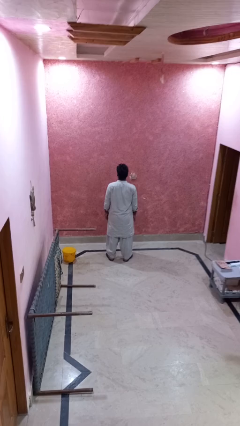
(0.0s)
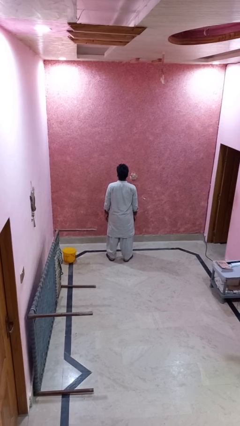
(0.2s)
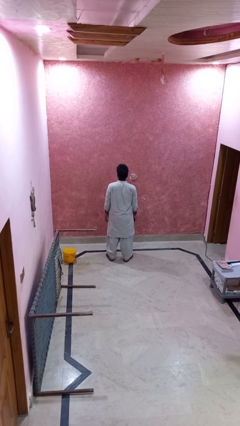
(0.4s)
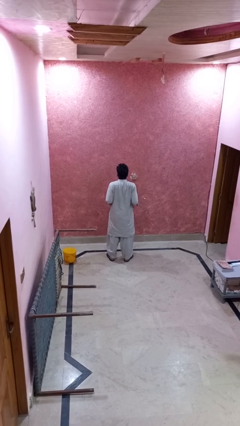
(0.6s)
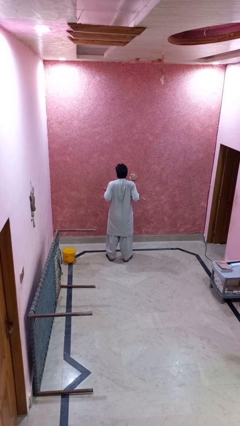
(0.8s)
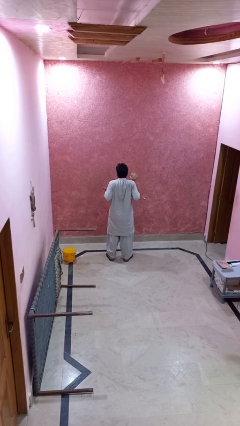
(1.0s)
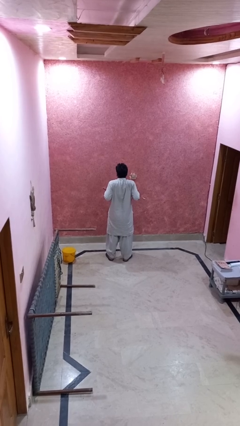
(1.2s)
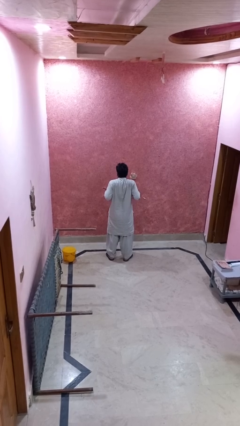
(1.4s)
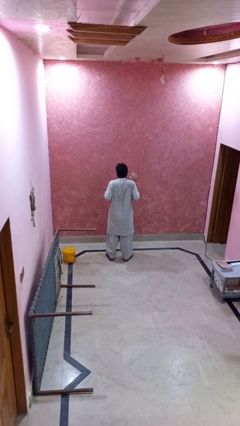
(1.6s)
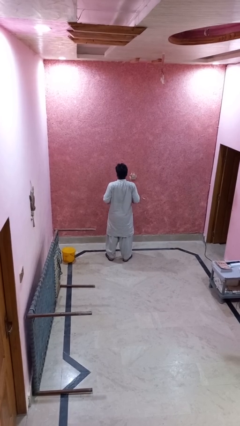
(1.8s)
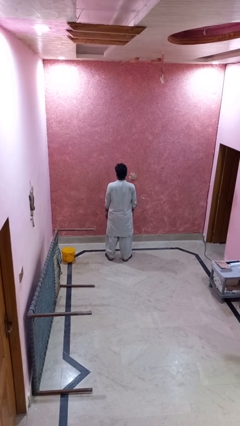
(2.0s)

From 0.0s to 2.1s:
person shrugs

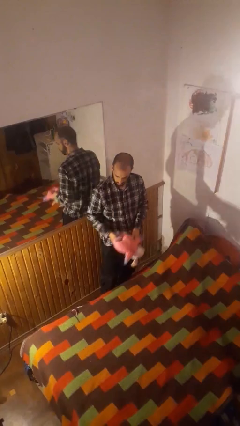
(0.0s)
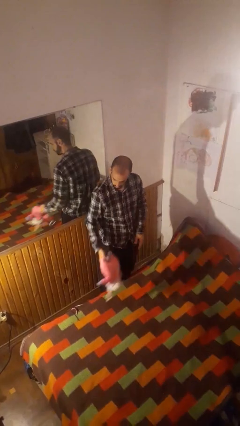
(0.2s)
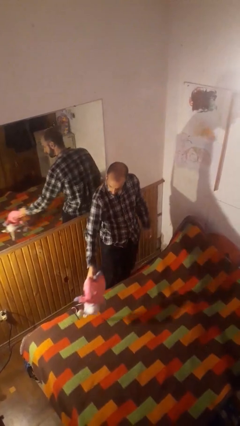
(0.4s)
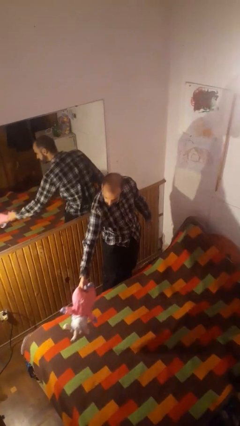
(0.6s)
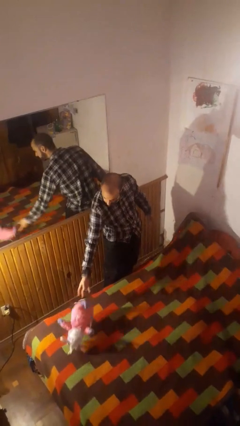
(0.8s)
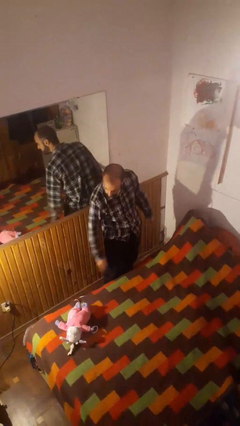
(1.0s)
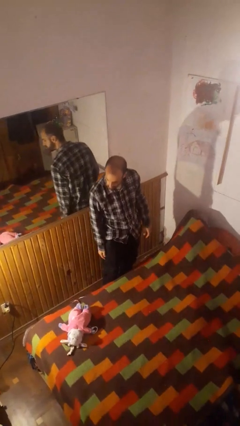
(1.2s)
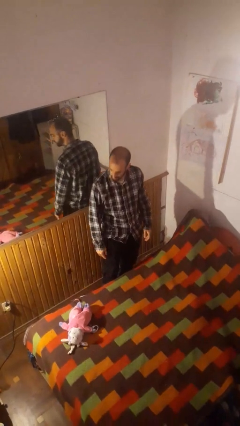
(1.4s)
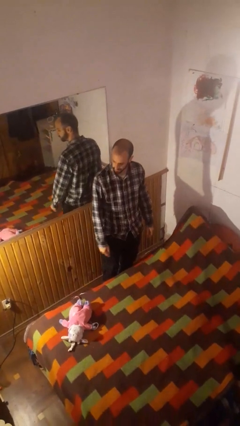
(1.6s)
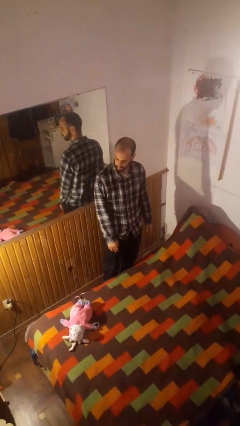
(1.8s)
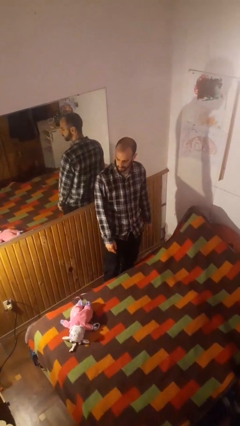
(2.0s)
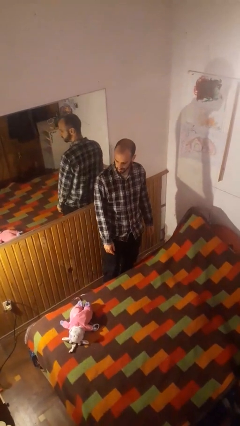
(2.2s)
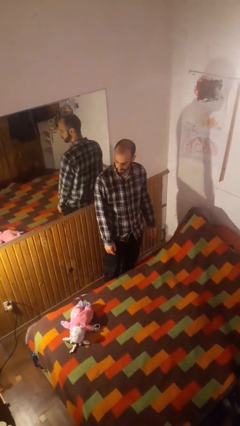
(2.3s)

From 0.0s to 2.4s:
person puts down object on bed

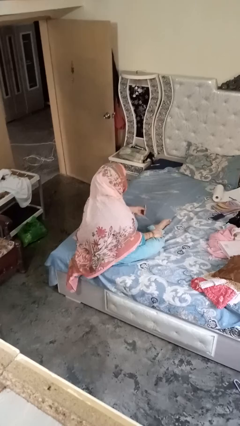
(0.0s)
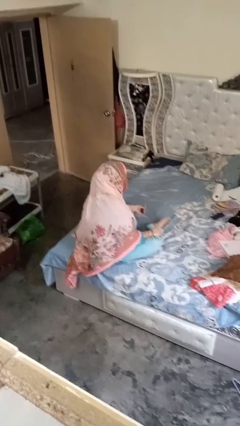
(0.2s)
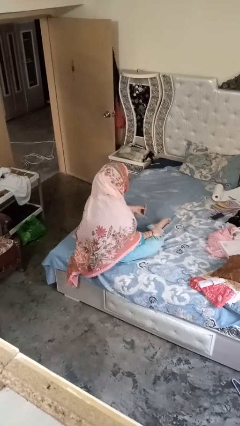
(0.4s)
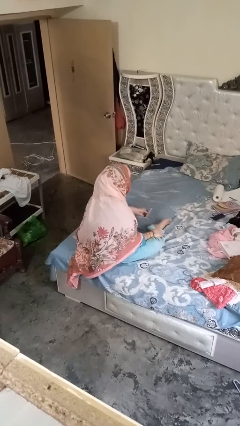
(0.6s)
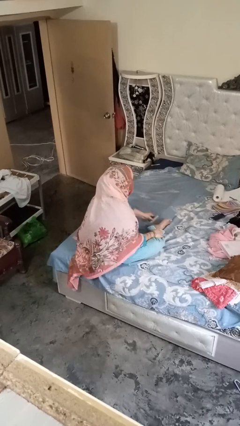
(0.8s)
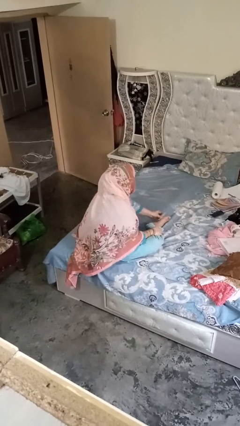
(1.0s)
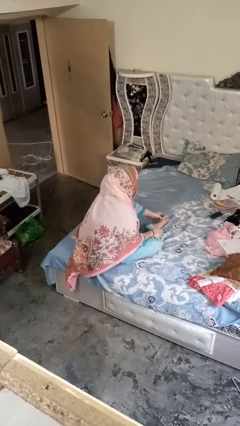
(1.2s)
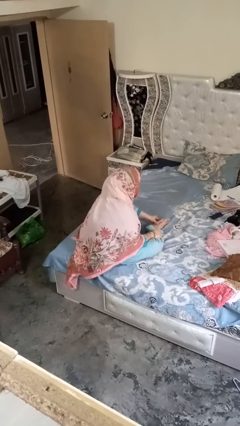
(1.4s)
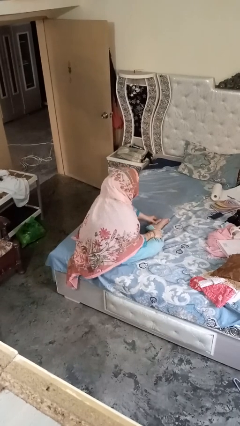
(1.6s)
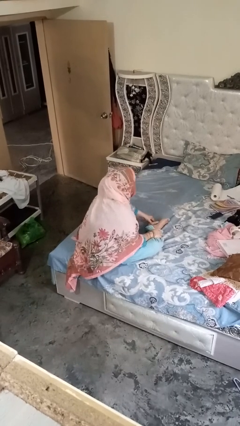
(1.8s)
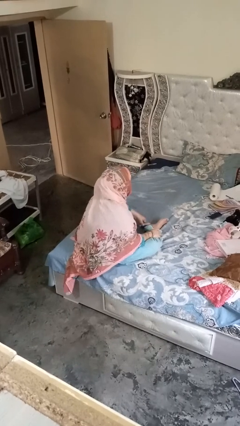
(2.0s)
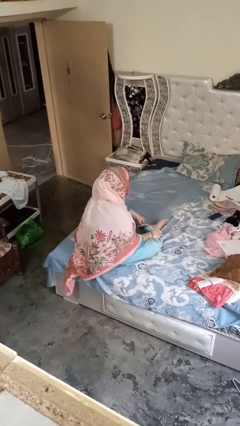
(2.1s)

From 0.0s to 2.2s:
person rubs foot

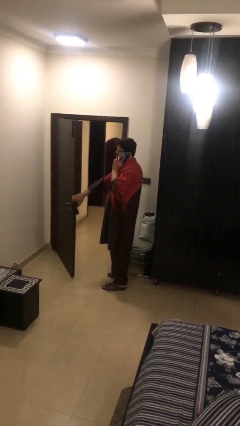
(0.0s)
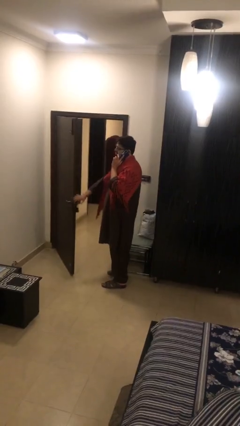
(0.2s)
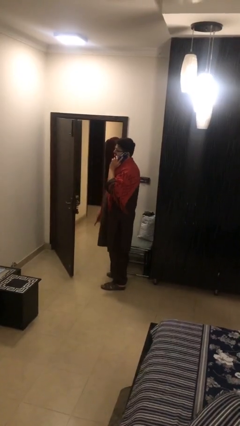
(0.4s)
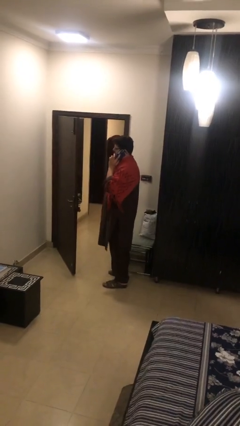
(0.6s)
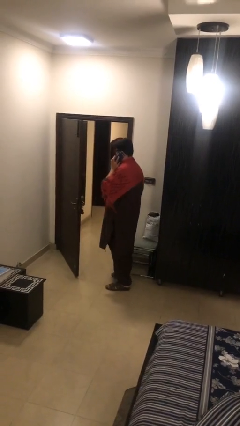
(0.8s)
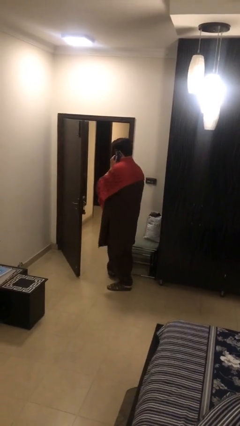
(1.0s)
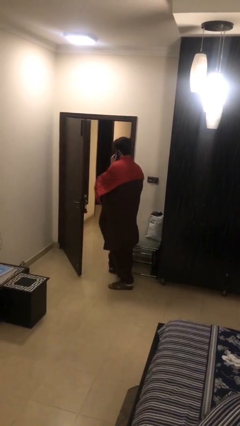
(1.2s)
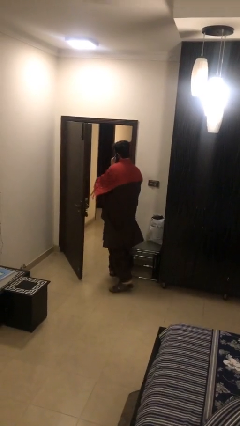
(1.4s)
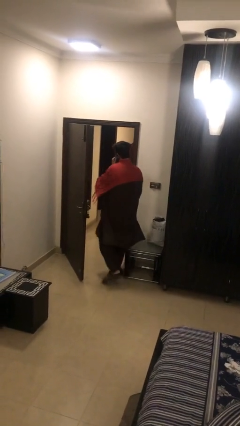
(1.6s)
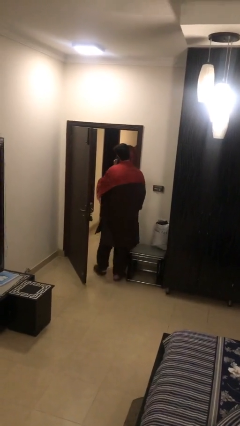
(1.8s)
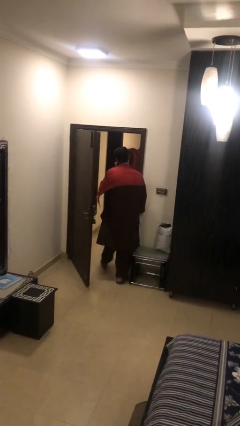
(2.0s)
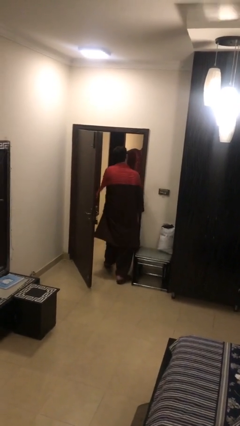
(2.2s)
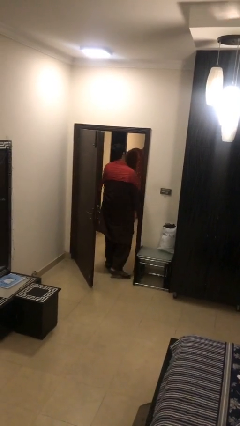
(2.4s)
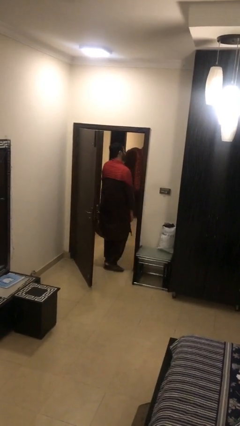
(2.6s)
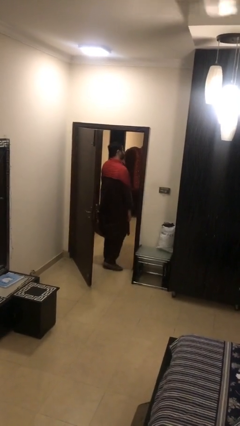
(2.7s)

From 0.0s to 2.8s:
person exits scene through structure

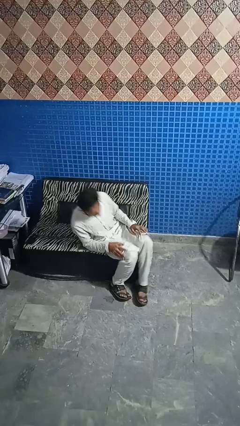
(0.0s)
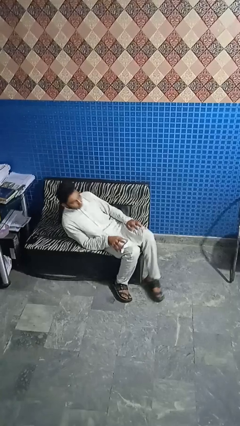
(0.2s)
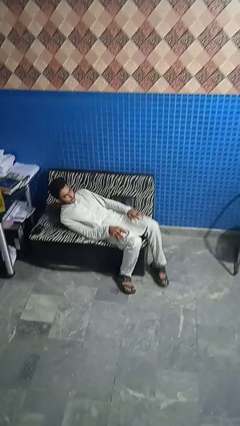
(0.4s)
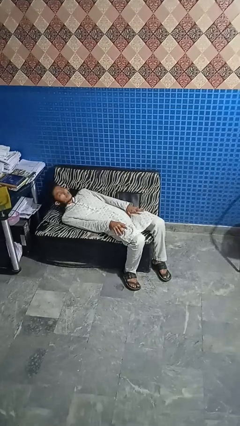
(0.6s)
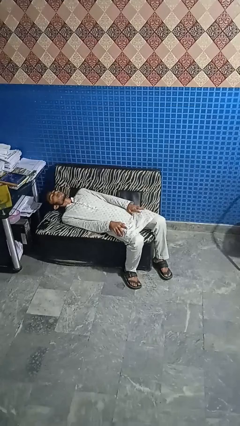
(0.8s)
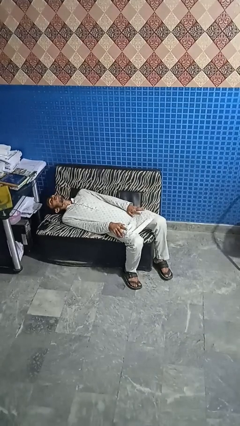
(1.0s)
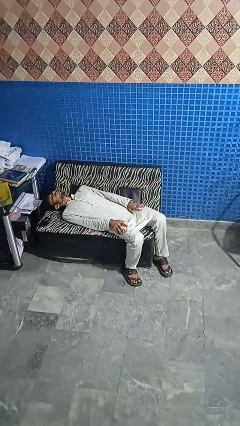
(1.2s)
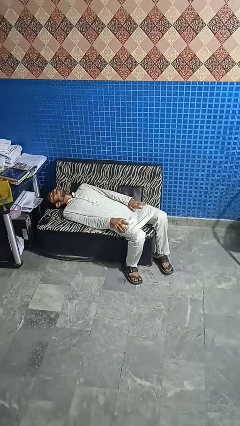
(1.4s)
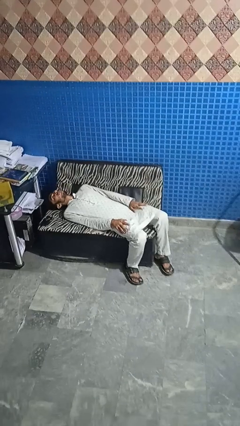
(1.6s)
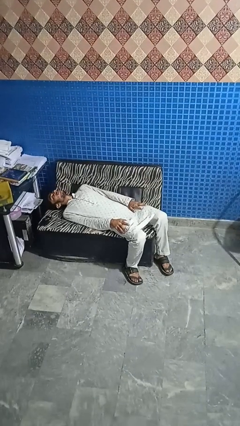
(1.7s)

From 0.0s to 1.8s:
person lies down on couch

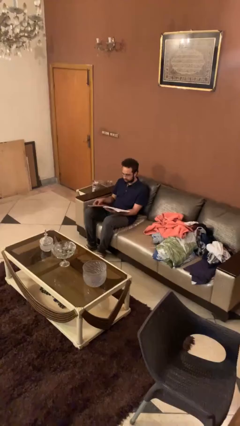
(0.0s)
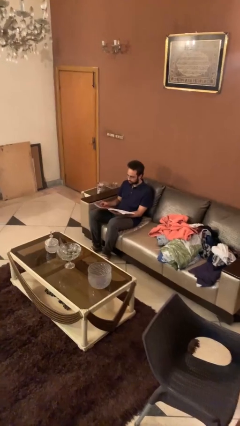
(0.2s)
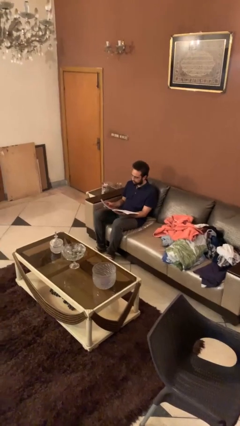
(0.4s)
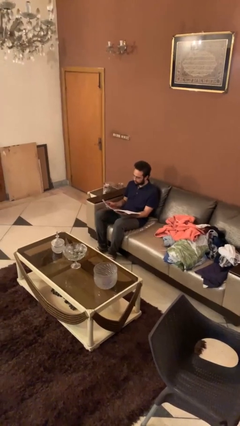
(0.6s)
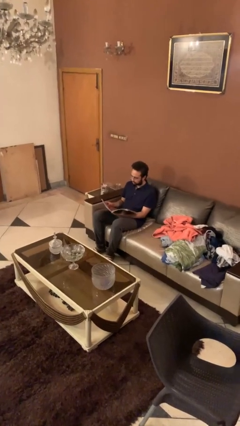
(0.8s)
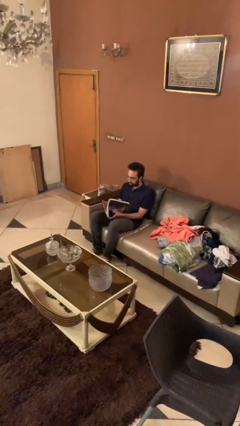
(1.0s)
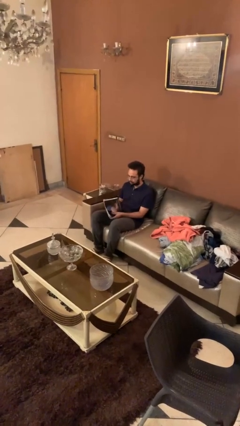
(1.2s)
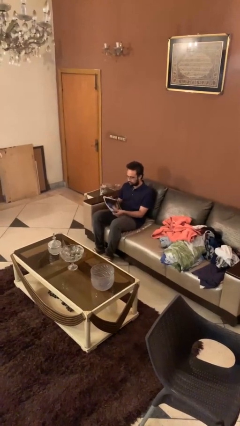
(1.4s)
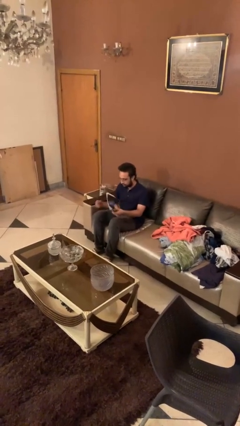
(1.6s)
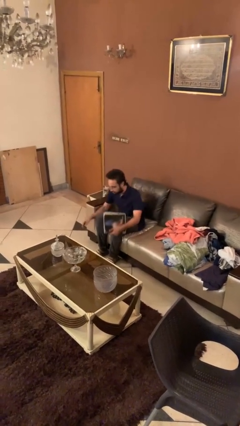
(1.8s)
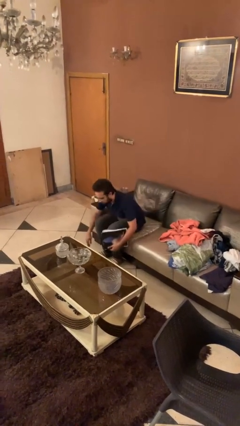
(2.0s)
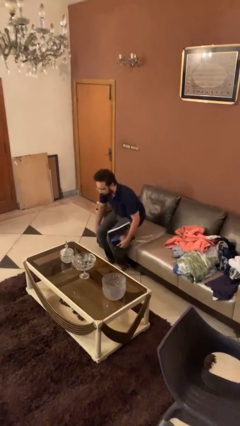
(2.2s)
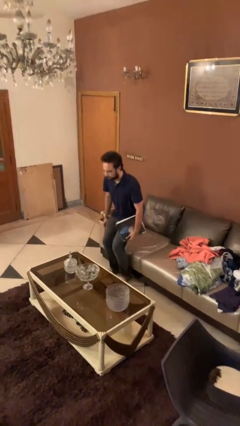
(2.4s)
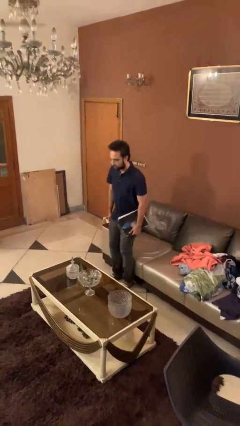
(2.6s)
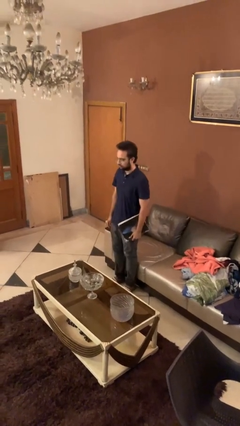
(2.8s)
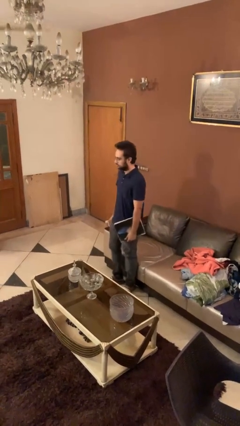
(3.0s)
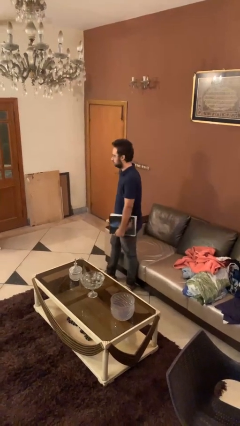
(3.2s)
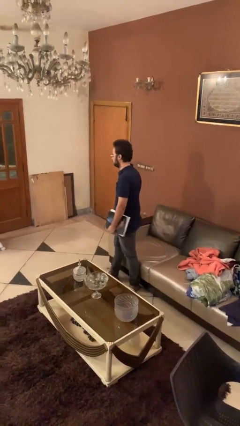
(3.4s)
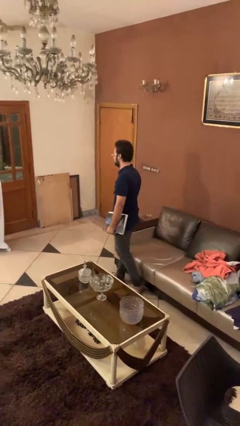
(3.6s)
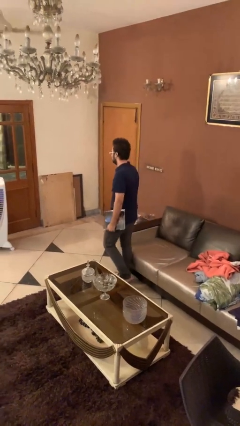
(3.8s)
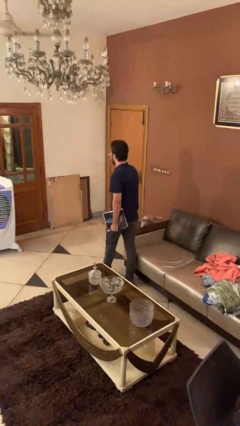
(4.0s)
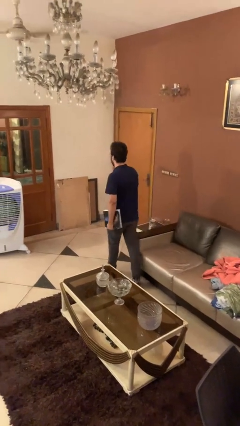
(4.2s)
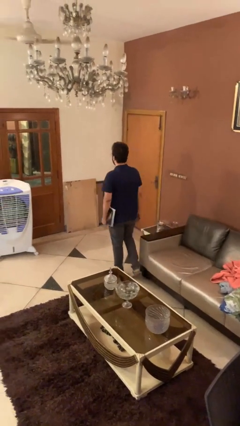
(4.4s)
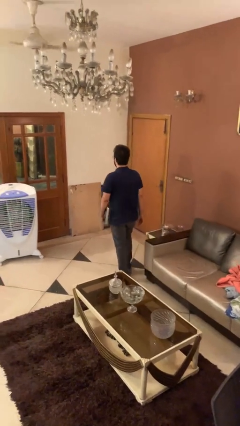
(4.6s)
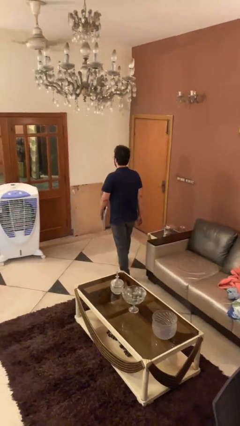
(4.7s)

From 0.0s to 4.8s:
person stands up

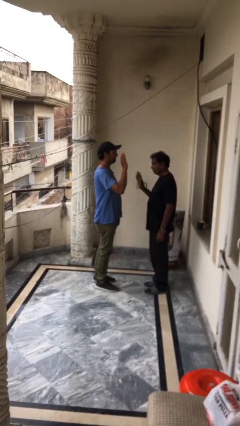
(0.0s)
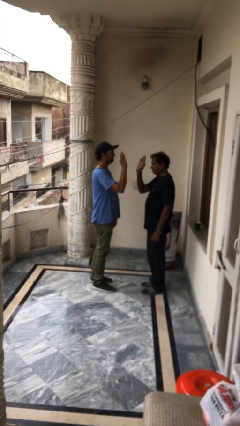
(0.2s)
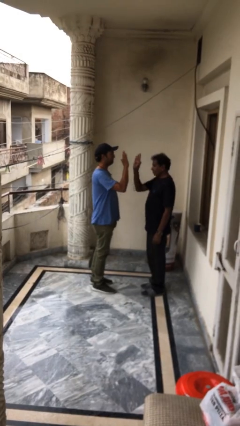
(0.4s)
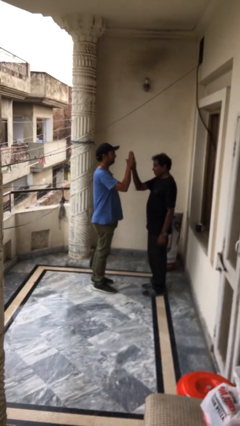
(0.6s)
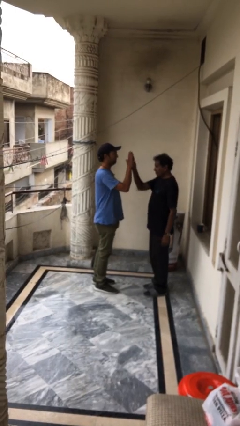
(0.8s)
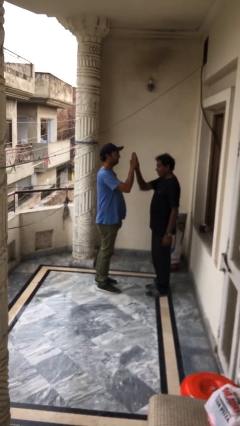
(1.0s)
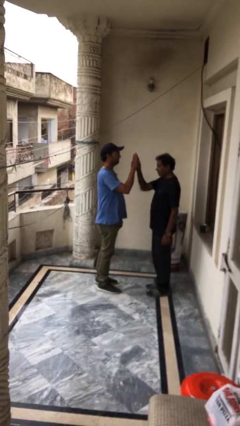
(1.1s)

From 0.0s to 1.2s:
person highfives hand
